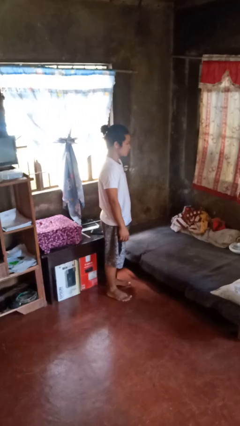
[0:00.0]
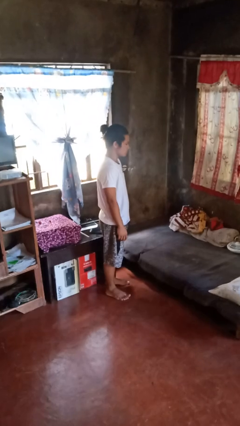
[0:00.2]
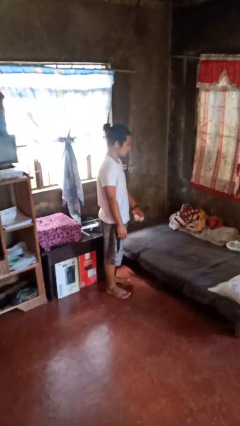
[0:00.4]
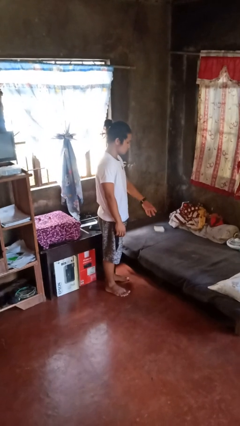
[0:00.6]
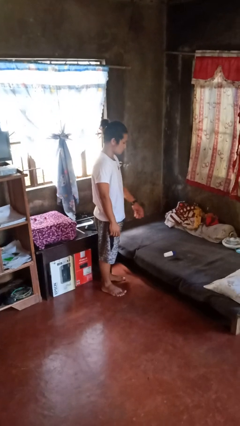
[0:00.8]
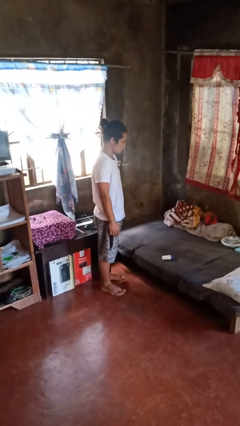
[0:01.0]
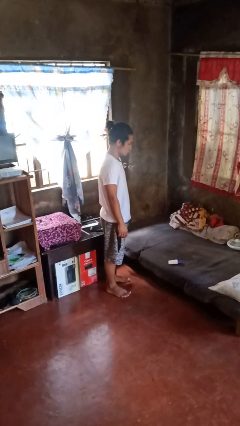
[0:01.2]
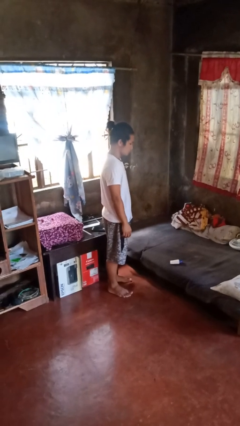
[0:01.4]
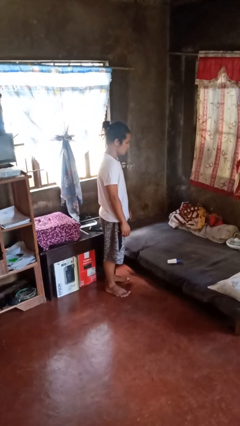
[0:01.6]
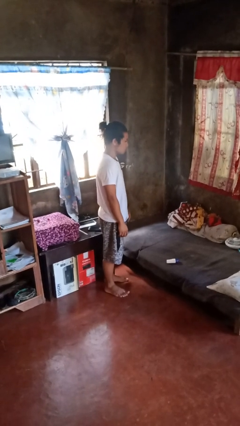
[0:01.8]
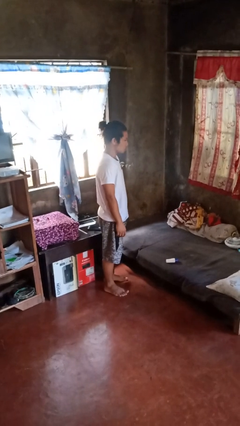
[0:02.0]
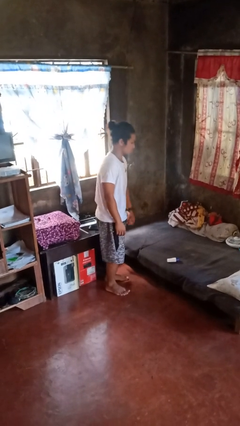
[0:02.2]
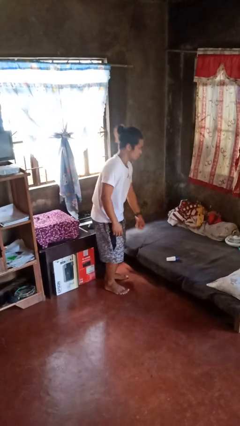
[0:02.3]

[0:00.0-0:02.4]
person throws object on bed

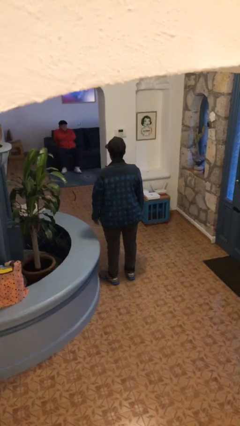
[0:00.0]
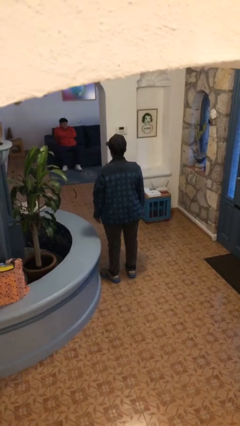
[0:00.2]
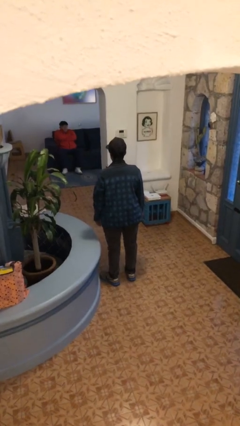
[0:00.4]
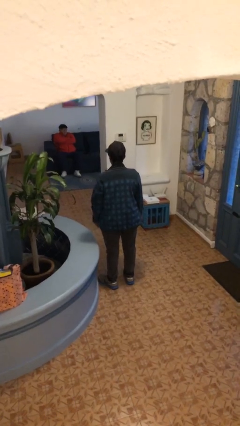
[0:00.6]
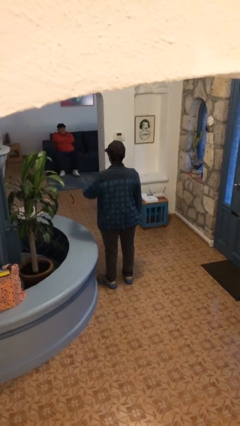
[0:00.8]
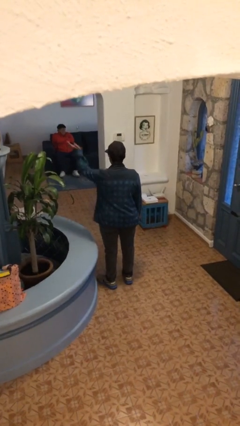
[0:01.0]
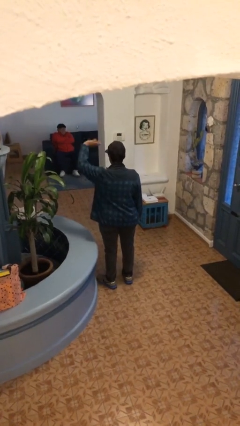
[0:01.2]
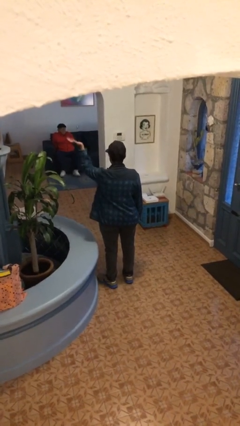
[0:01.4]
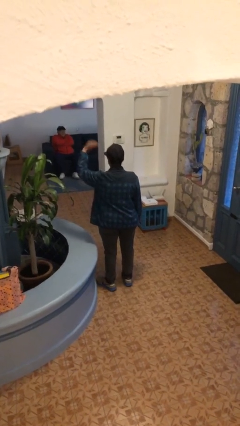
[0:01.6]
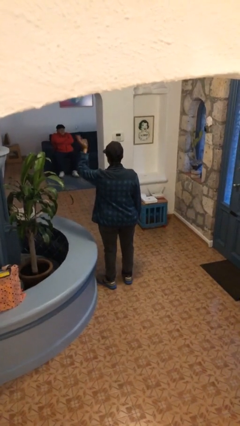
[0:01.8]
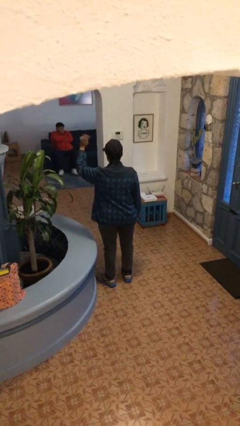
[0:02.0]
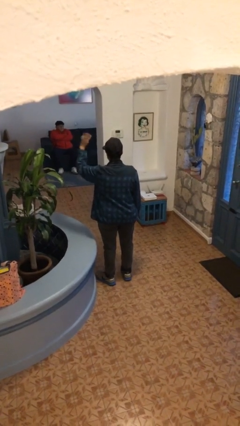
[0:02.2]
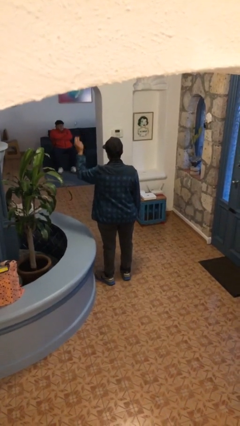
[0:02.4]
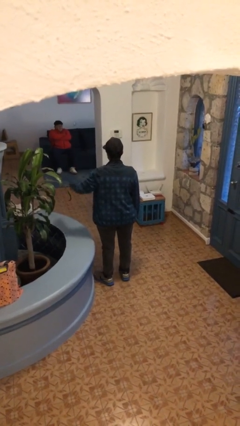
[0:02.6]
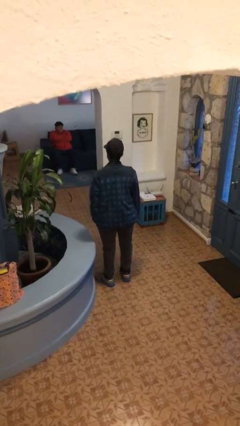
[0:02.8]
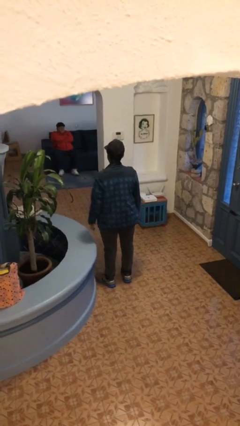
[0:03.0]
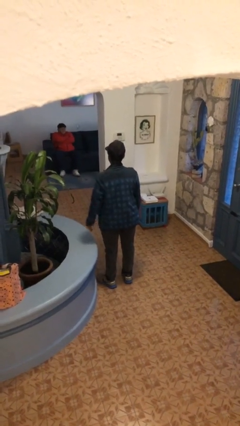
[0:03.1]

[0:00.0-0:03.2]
person waves at person

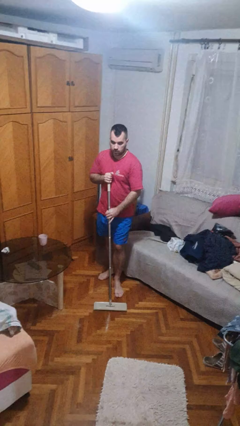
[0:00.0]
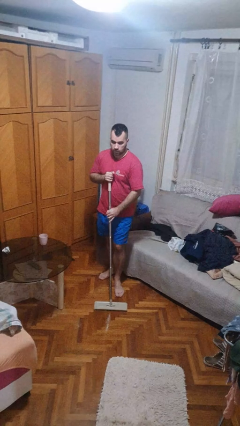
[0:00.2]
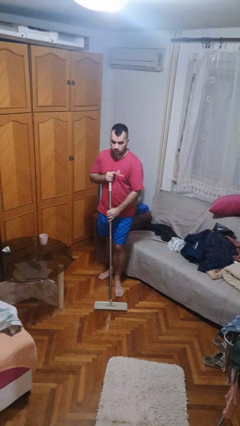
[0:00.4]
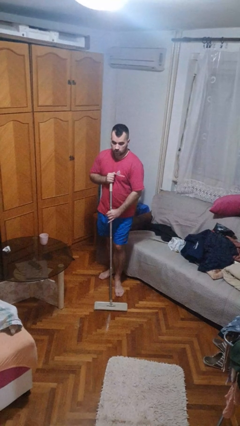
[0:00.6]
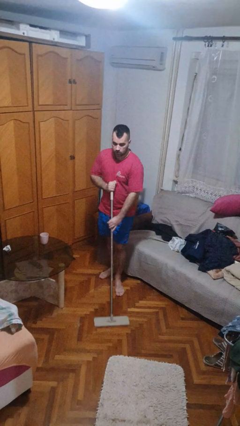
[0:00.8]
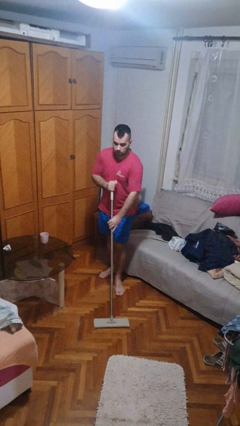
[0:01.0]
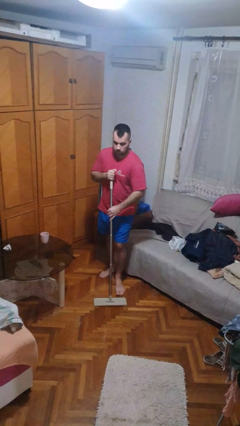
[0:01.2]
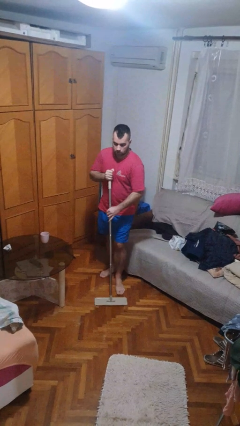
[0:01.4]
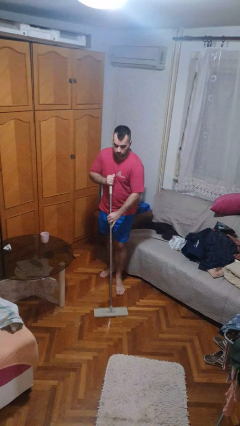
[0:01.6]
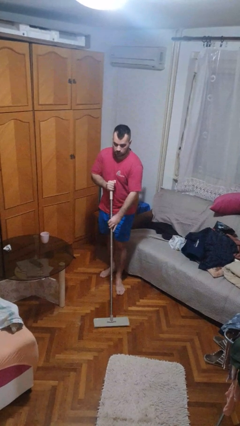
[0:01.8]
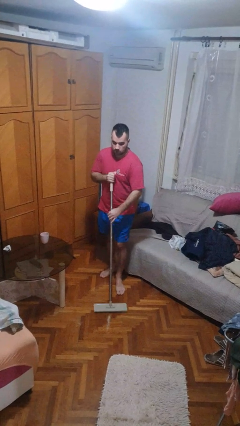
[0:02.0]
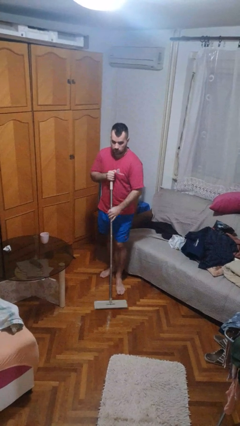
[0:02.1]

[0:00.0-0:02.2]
person mops

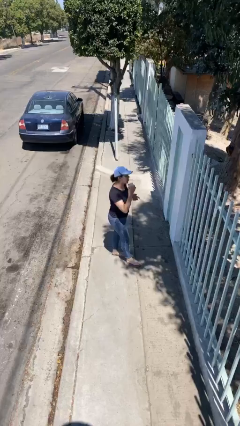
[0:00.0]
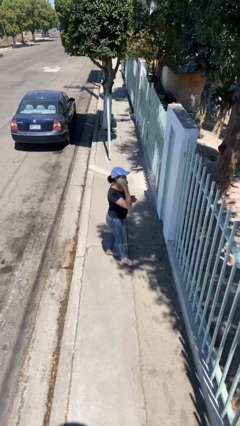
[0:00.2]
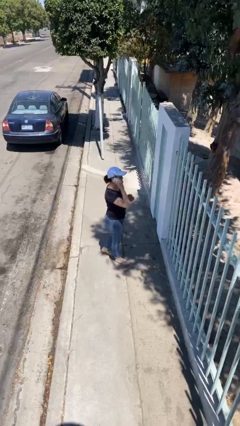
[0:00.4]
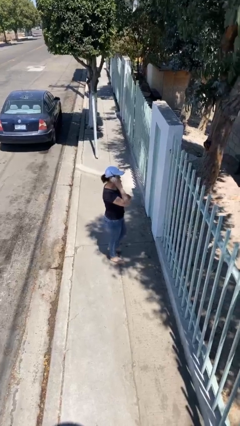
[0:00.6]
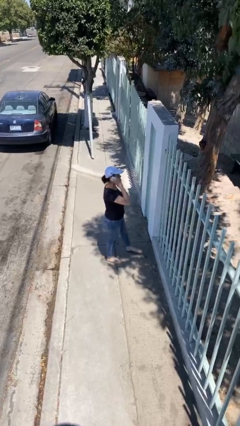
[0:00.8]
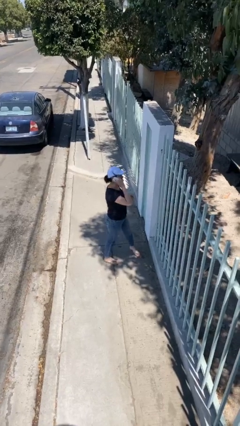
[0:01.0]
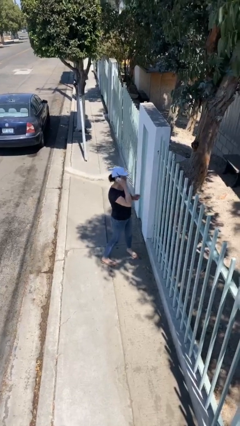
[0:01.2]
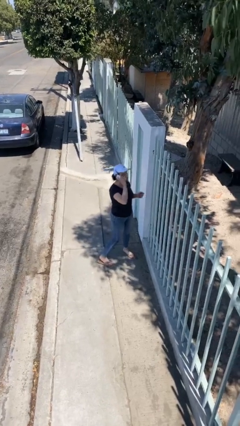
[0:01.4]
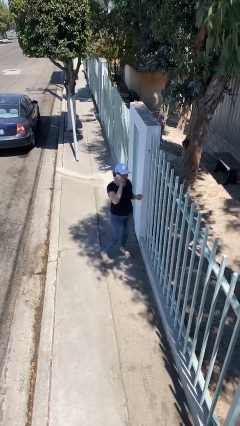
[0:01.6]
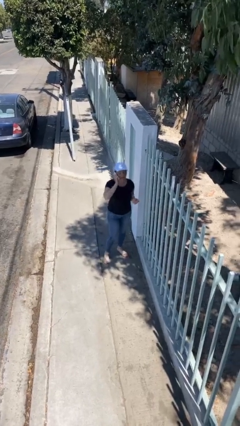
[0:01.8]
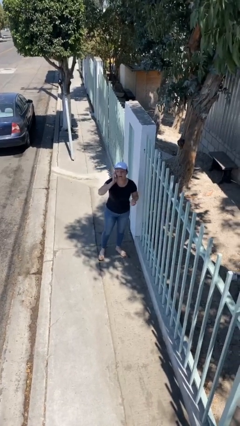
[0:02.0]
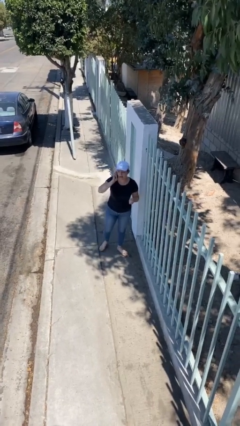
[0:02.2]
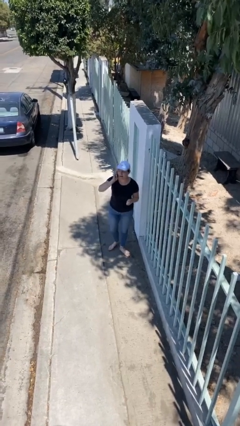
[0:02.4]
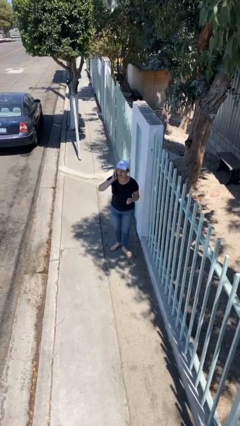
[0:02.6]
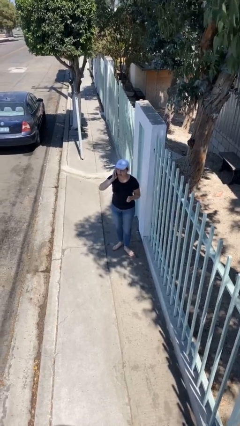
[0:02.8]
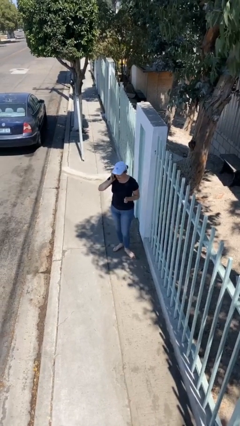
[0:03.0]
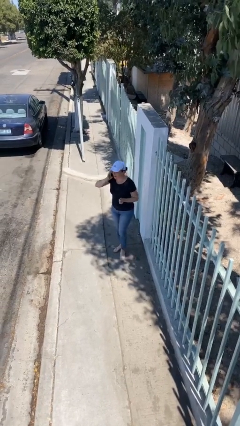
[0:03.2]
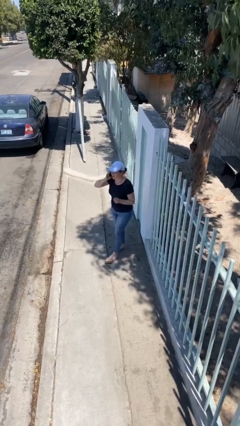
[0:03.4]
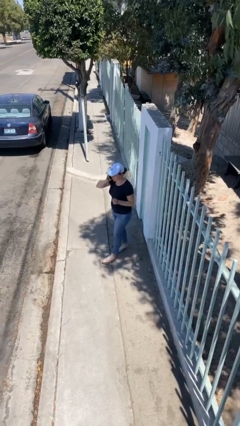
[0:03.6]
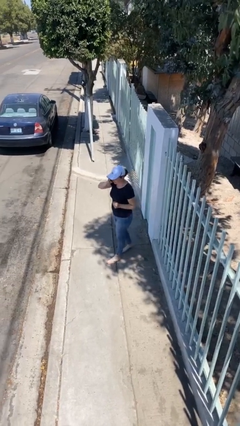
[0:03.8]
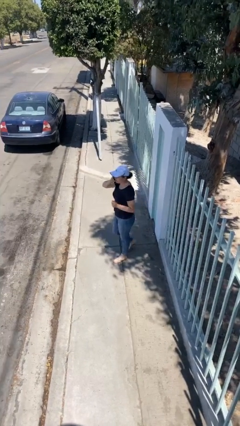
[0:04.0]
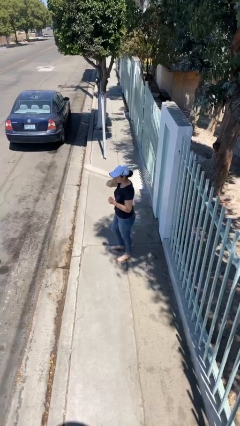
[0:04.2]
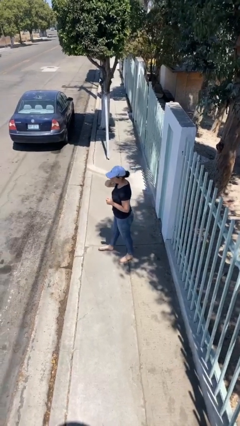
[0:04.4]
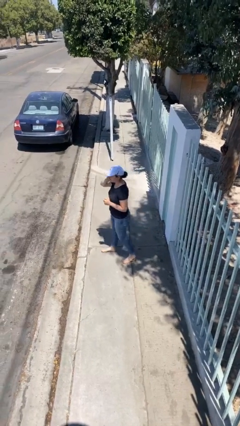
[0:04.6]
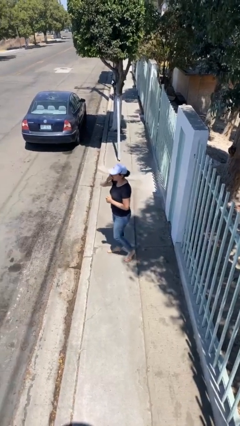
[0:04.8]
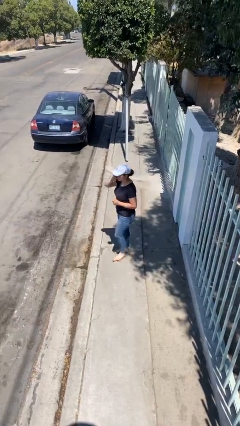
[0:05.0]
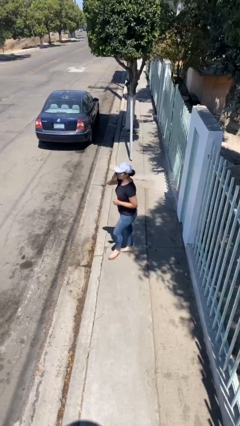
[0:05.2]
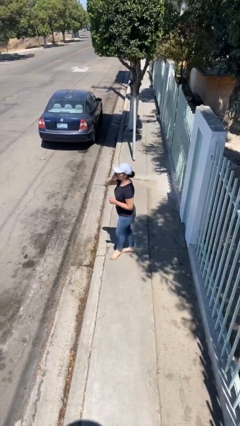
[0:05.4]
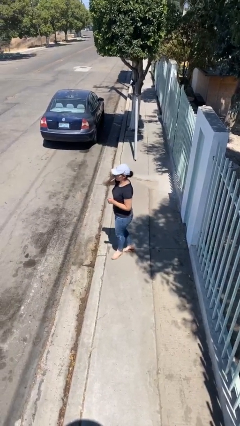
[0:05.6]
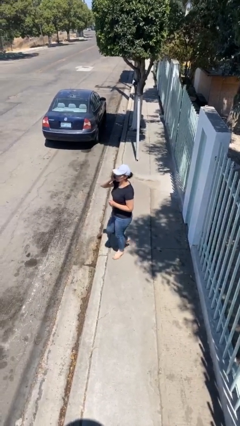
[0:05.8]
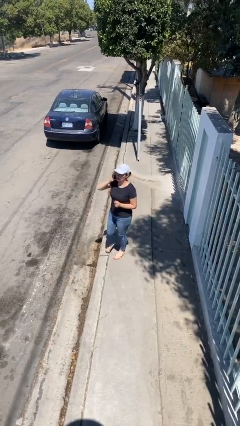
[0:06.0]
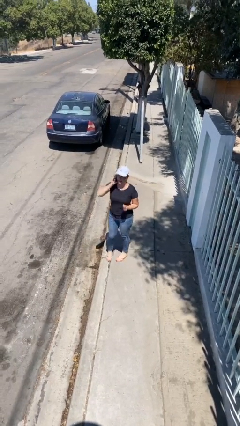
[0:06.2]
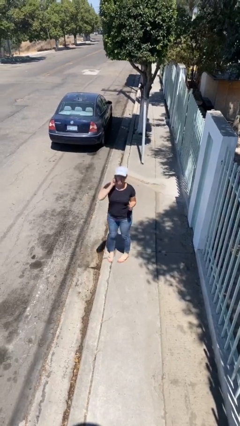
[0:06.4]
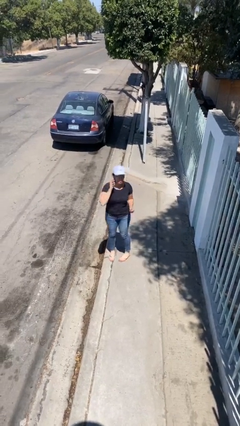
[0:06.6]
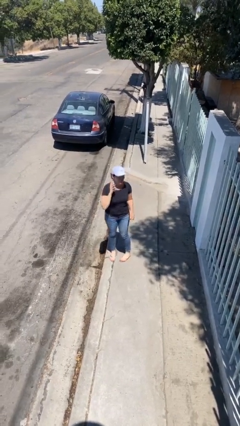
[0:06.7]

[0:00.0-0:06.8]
person talks on phone

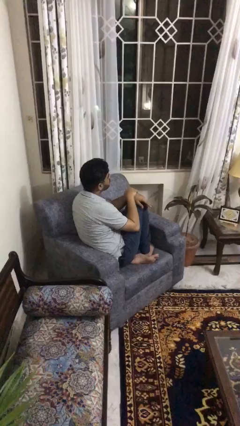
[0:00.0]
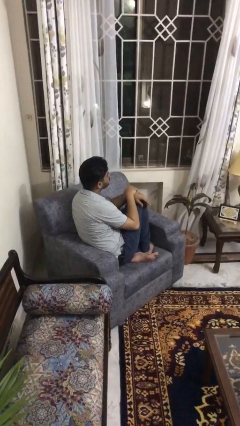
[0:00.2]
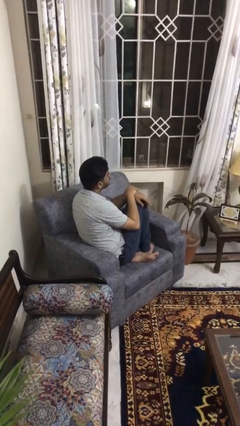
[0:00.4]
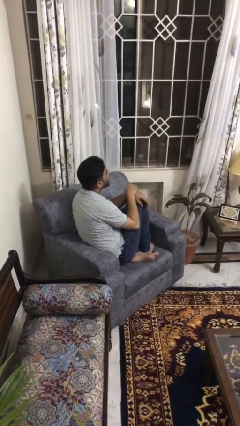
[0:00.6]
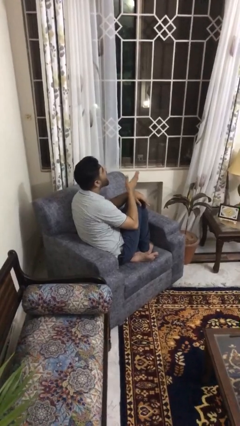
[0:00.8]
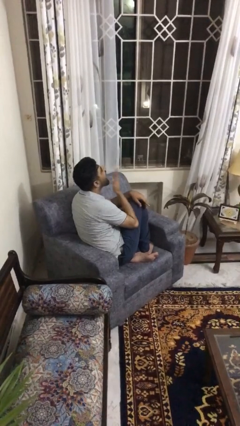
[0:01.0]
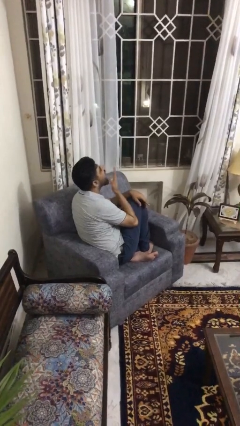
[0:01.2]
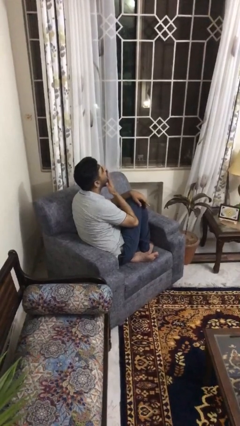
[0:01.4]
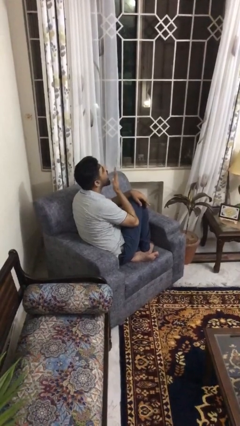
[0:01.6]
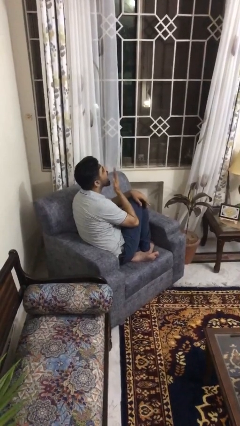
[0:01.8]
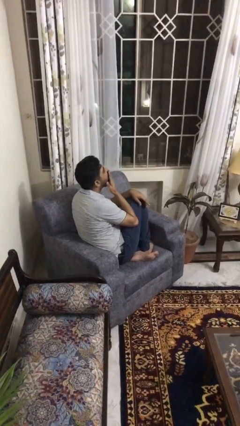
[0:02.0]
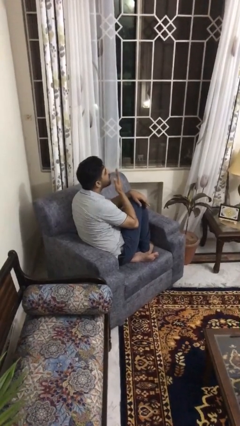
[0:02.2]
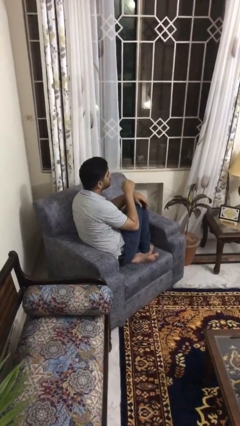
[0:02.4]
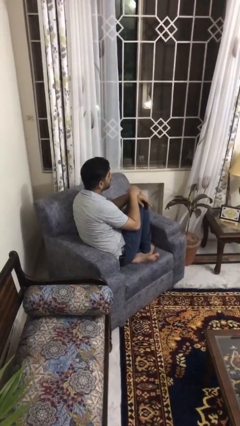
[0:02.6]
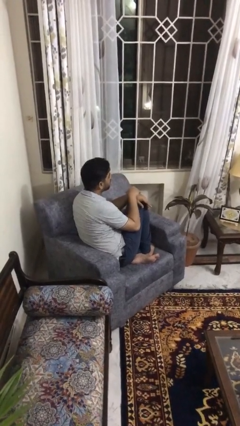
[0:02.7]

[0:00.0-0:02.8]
person yawns
